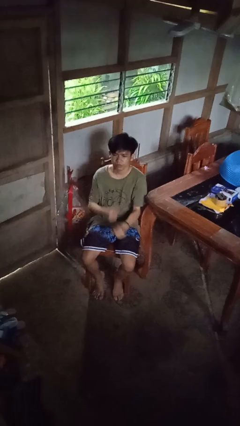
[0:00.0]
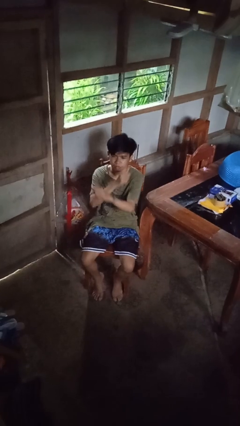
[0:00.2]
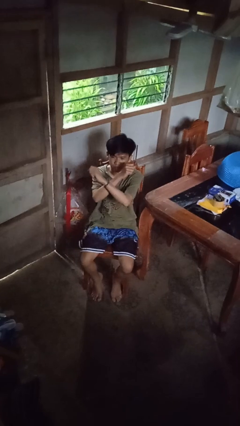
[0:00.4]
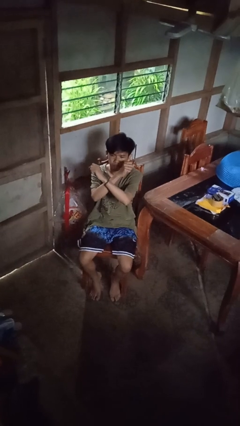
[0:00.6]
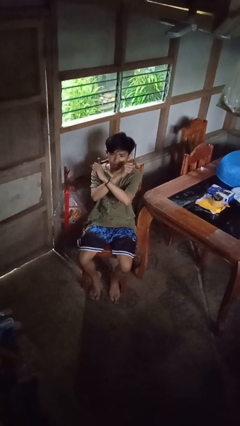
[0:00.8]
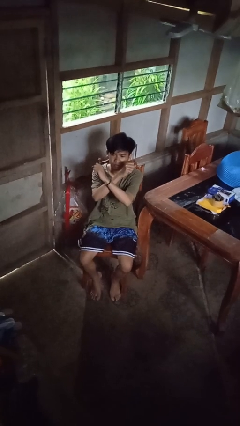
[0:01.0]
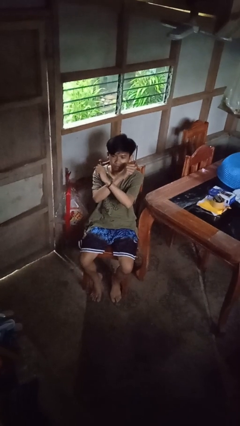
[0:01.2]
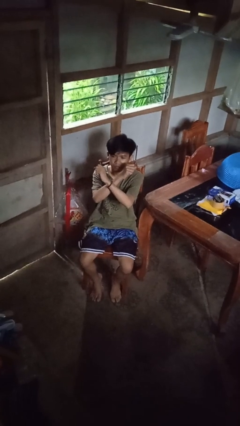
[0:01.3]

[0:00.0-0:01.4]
person gestures arms x

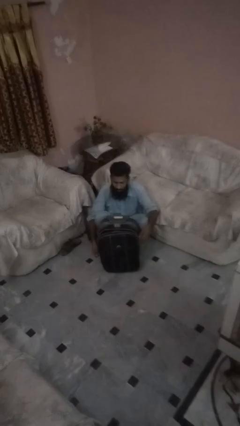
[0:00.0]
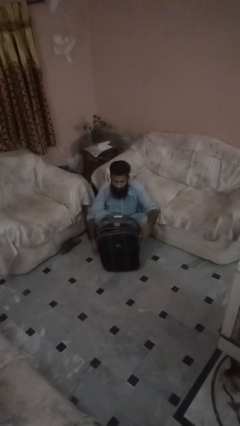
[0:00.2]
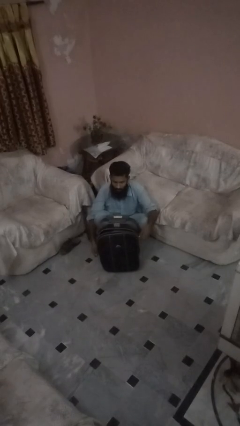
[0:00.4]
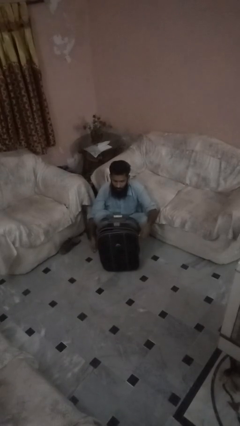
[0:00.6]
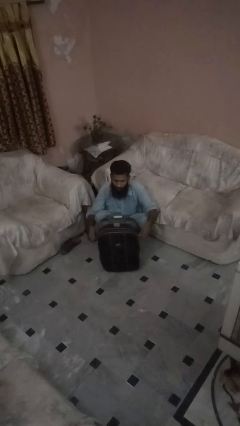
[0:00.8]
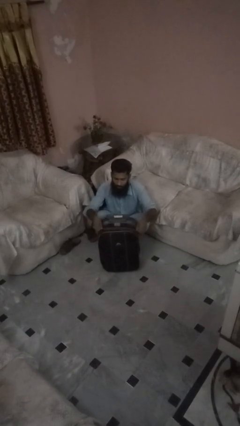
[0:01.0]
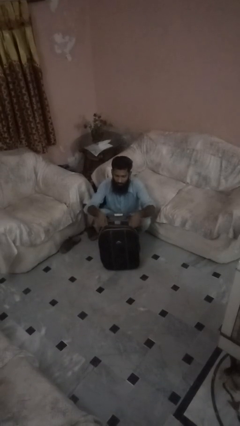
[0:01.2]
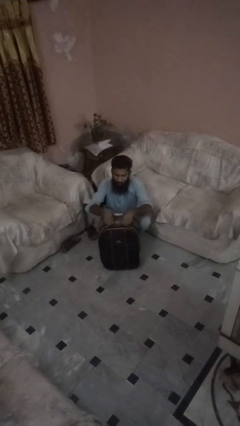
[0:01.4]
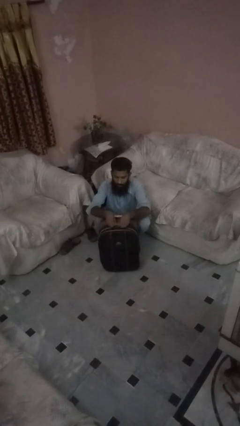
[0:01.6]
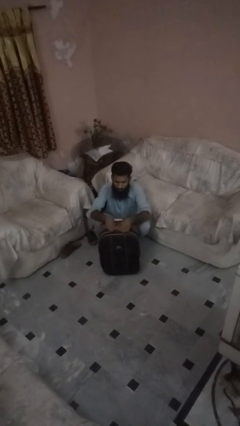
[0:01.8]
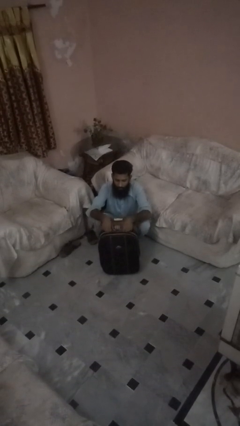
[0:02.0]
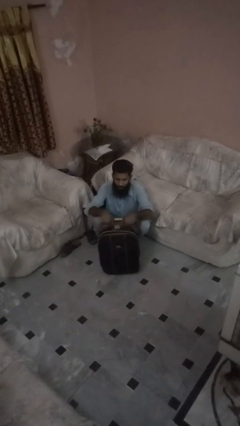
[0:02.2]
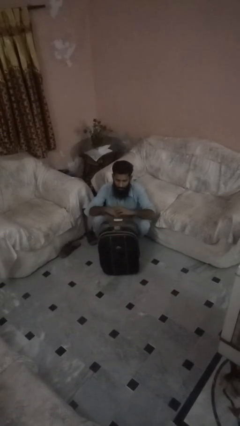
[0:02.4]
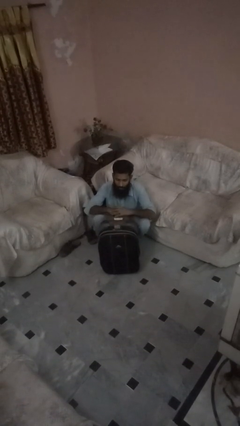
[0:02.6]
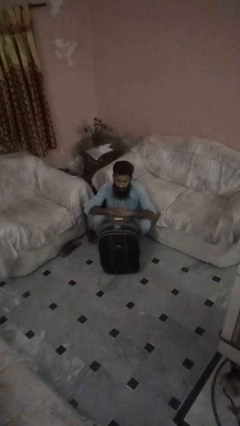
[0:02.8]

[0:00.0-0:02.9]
person closes suitcase

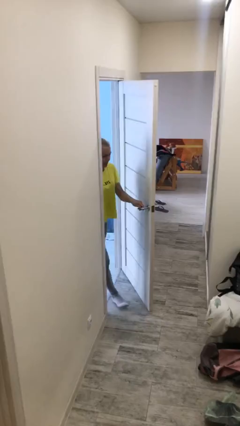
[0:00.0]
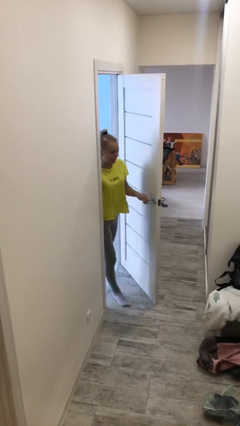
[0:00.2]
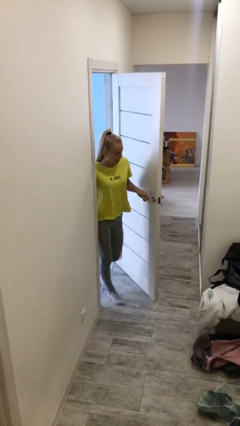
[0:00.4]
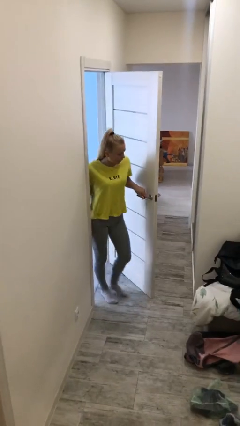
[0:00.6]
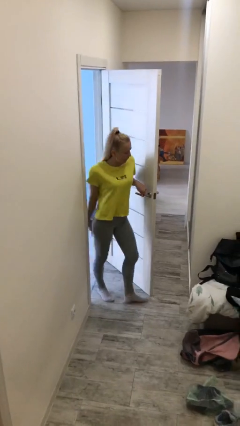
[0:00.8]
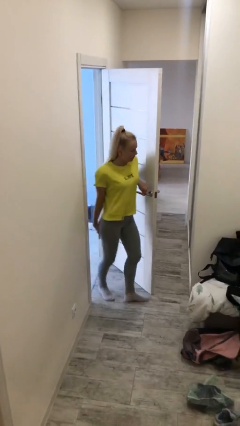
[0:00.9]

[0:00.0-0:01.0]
person enters scene through structure

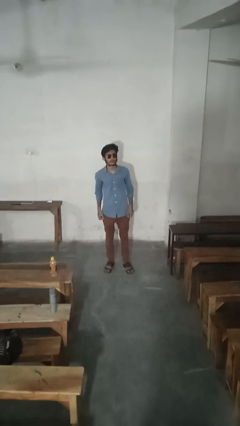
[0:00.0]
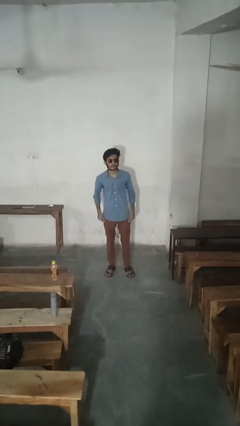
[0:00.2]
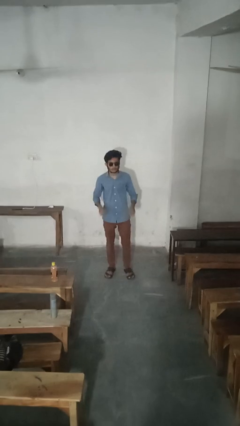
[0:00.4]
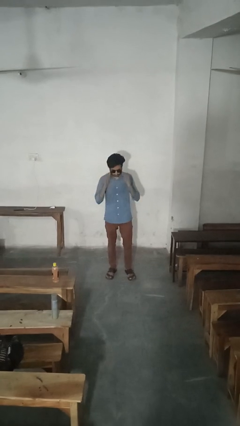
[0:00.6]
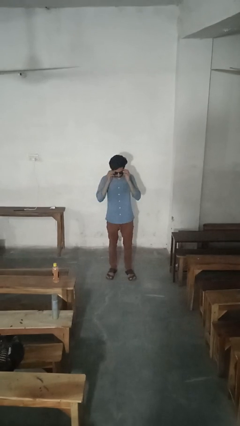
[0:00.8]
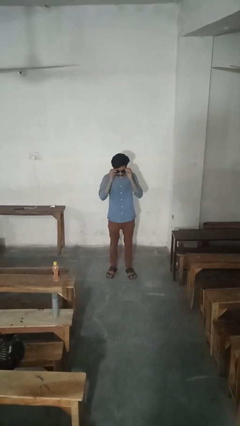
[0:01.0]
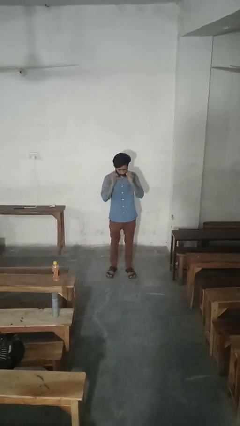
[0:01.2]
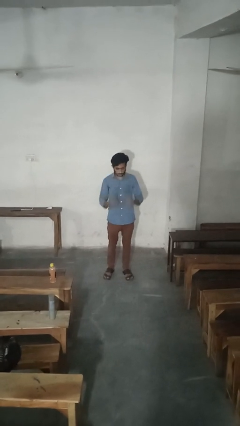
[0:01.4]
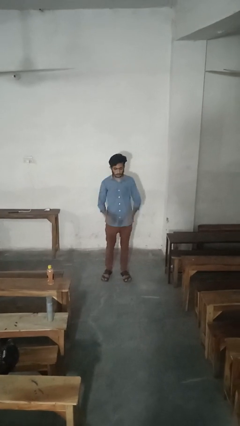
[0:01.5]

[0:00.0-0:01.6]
person takes off sunglasses

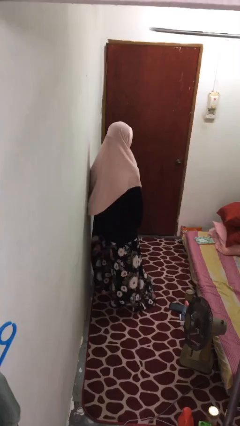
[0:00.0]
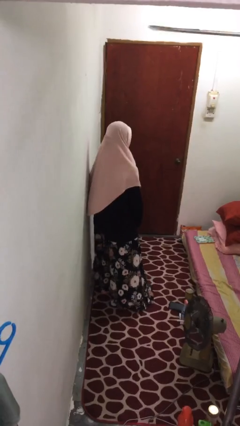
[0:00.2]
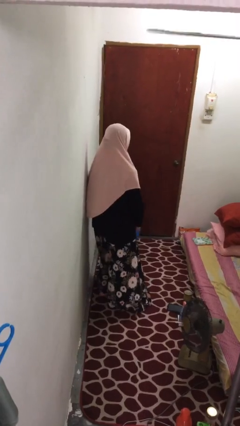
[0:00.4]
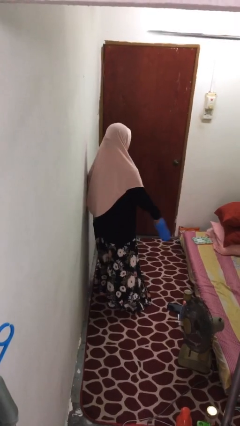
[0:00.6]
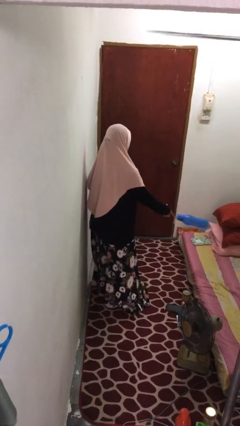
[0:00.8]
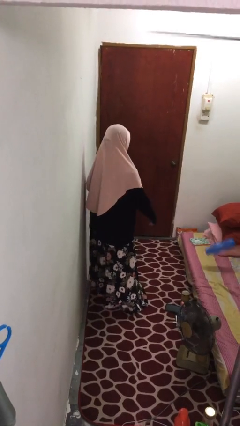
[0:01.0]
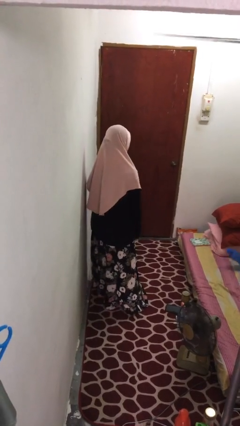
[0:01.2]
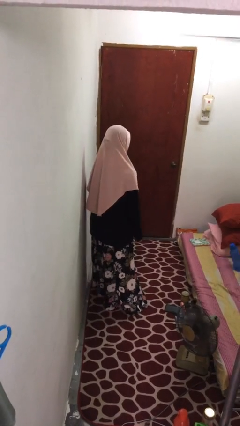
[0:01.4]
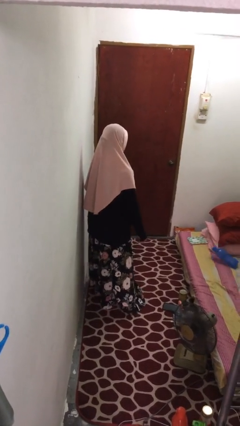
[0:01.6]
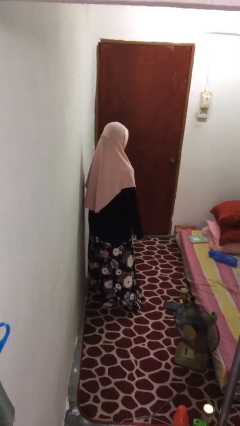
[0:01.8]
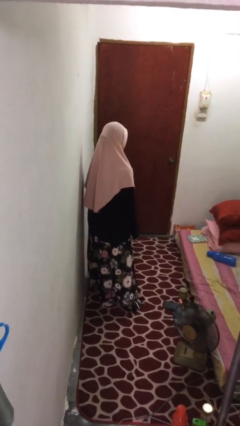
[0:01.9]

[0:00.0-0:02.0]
person throws object on bed

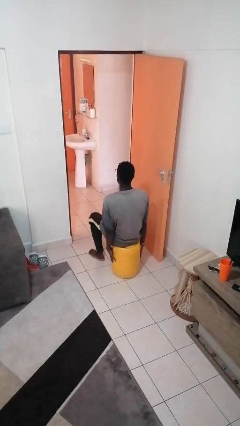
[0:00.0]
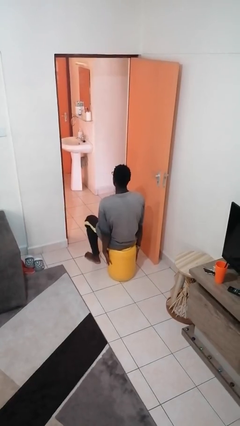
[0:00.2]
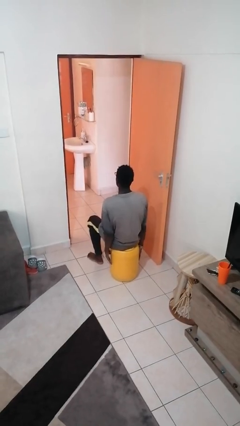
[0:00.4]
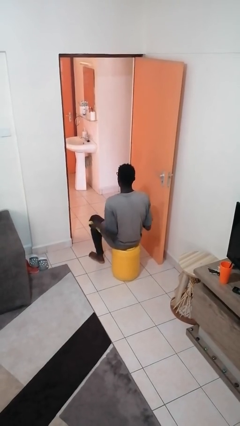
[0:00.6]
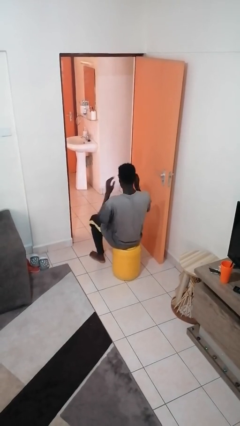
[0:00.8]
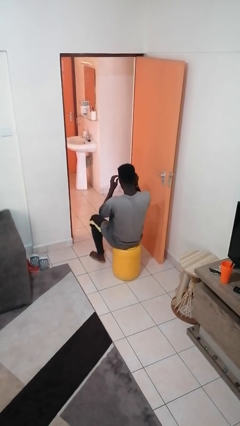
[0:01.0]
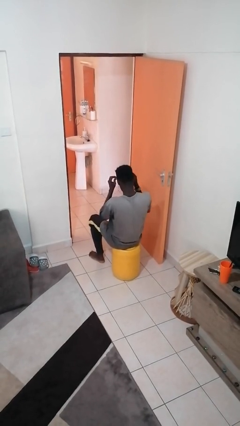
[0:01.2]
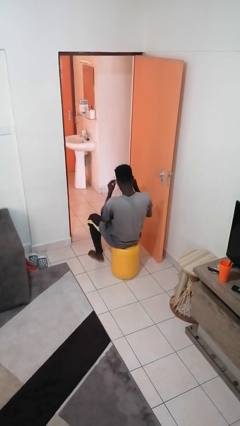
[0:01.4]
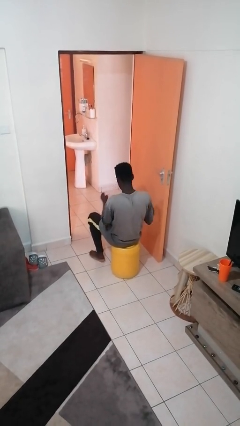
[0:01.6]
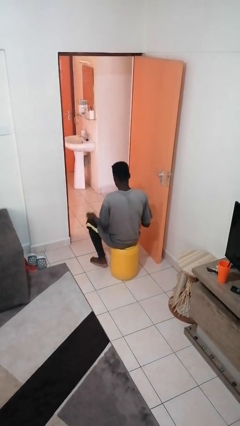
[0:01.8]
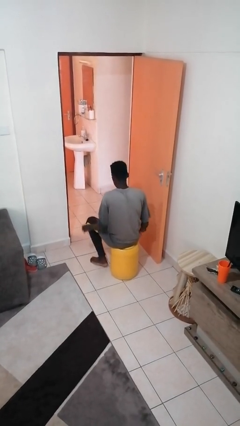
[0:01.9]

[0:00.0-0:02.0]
person takes off glasses

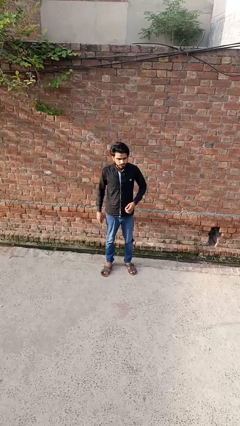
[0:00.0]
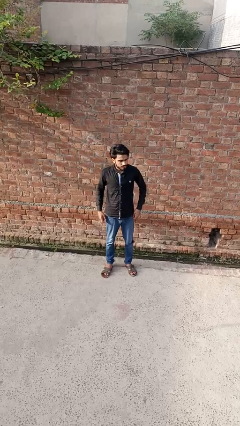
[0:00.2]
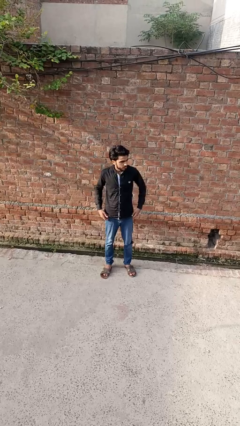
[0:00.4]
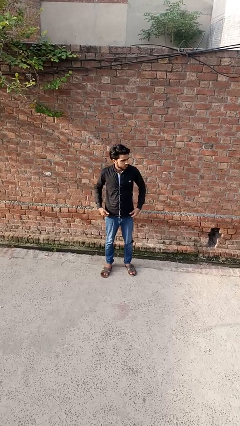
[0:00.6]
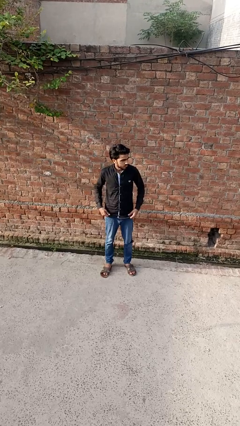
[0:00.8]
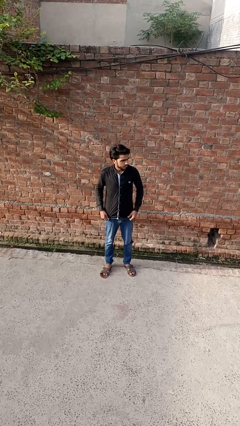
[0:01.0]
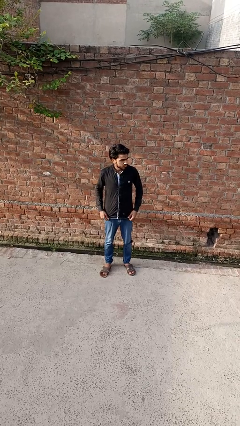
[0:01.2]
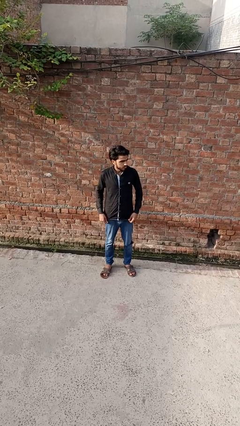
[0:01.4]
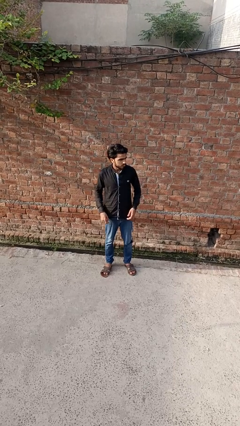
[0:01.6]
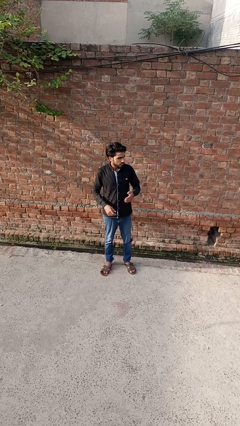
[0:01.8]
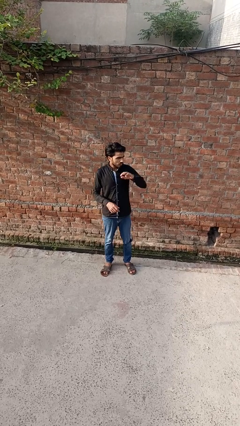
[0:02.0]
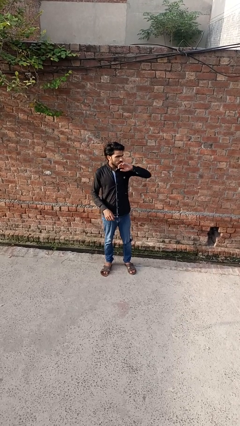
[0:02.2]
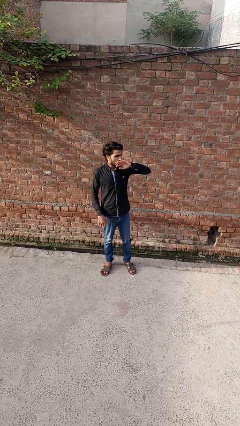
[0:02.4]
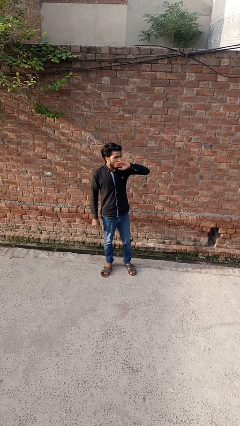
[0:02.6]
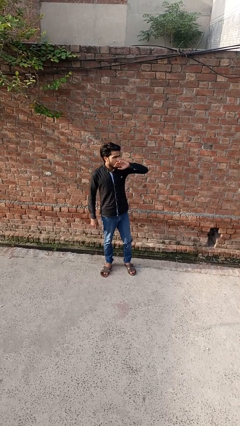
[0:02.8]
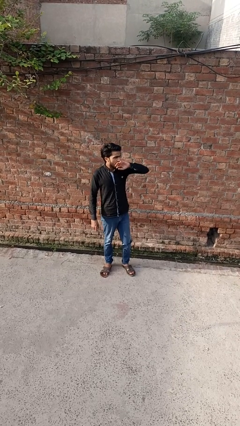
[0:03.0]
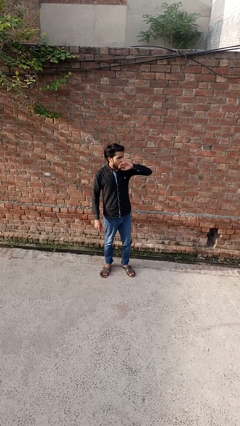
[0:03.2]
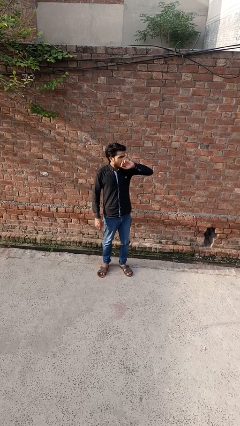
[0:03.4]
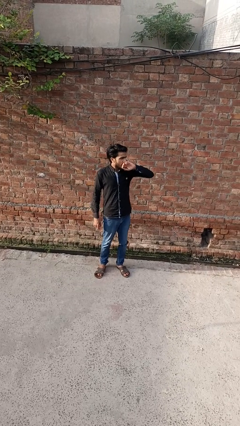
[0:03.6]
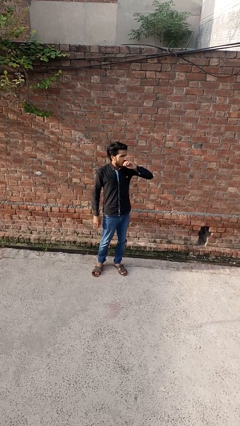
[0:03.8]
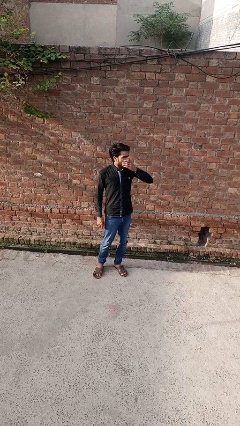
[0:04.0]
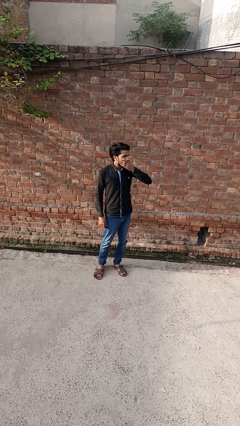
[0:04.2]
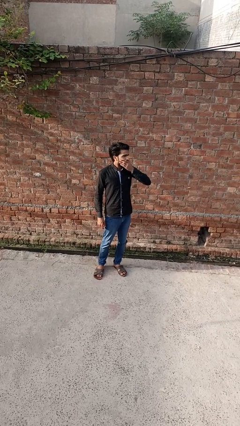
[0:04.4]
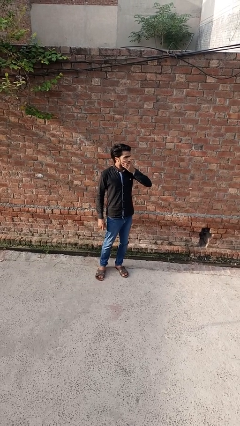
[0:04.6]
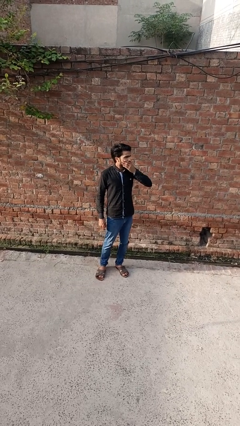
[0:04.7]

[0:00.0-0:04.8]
person yawns

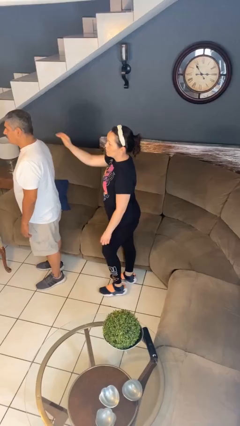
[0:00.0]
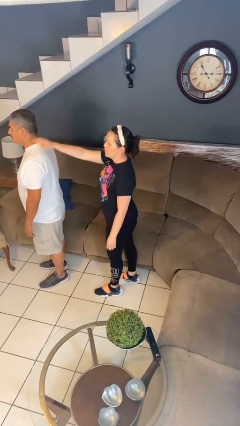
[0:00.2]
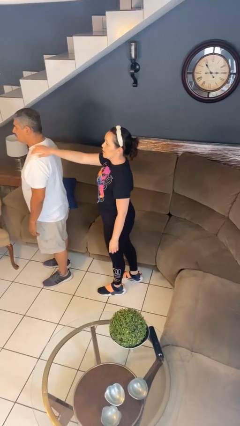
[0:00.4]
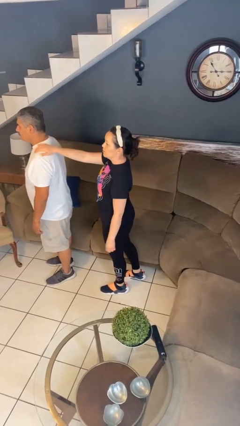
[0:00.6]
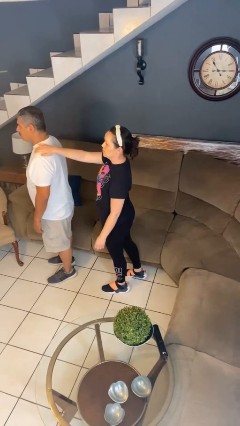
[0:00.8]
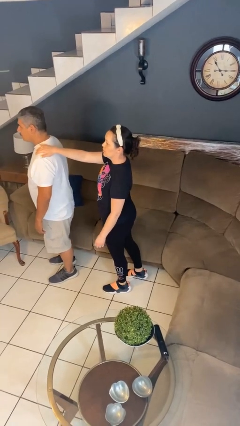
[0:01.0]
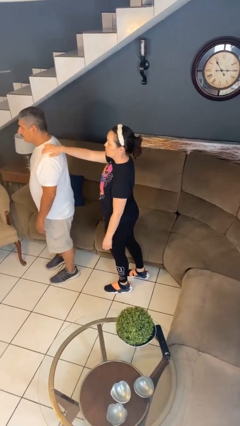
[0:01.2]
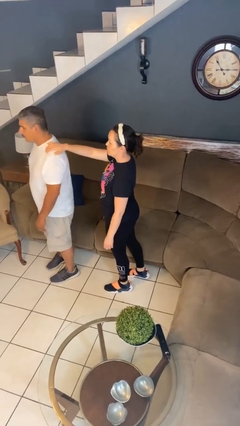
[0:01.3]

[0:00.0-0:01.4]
person grabs person by shoulder
